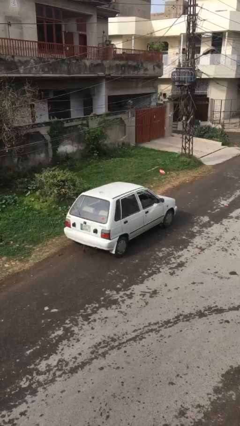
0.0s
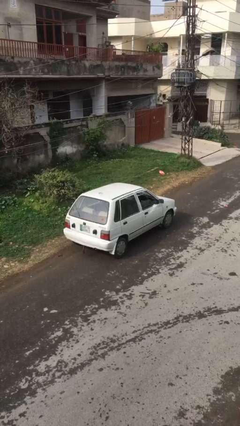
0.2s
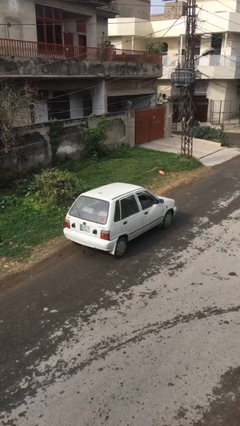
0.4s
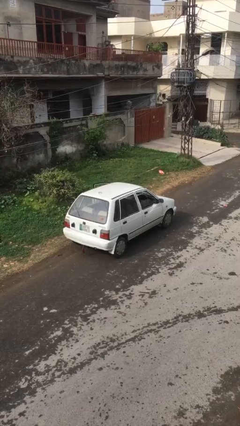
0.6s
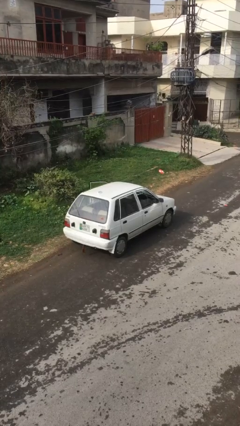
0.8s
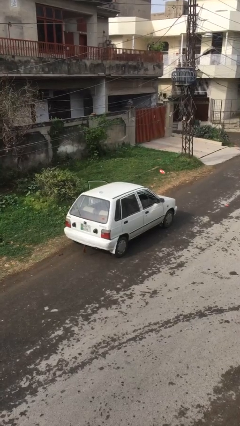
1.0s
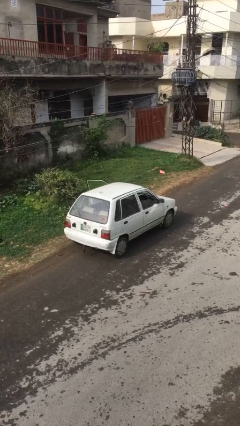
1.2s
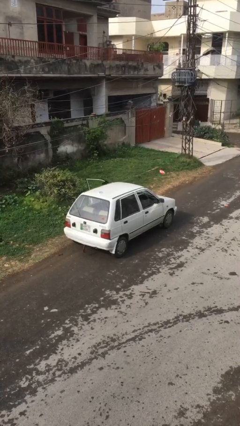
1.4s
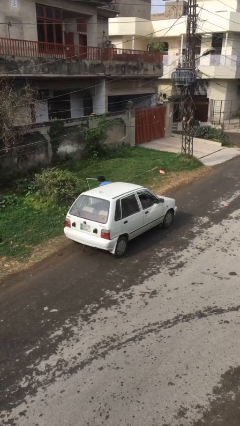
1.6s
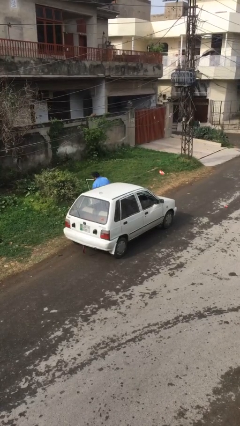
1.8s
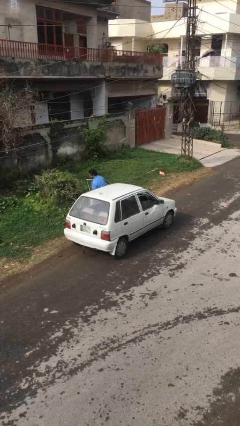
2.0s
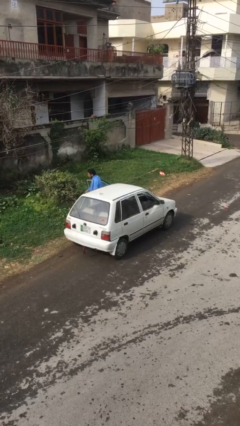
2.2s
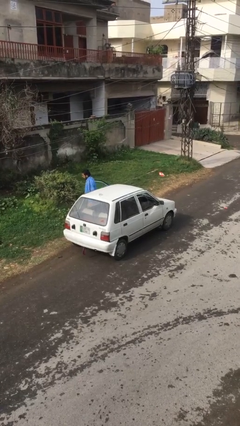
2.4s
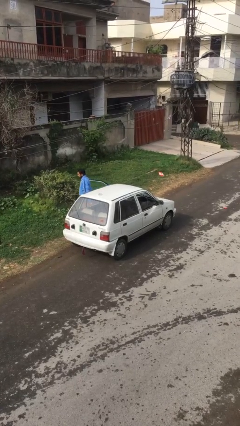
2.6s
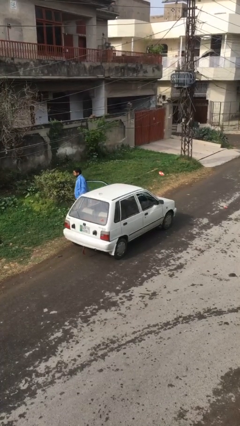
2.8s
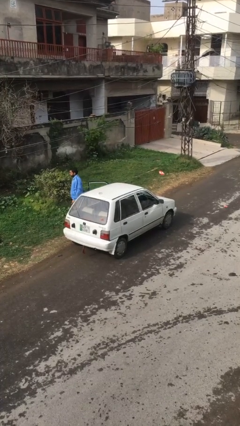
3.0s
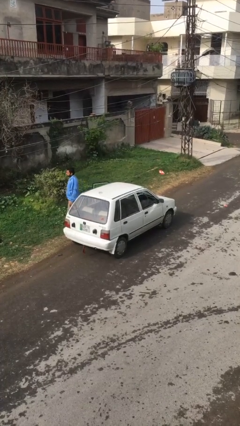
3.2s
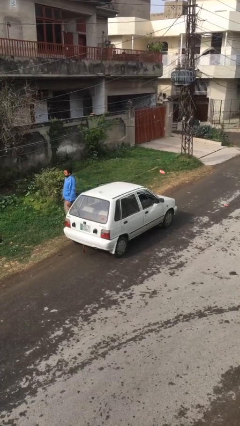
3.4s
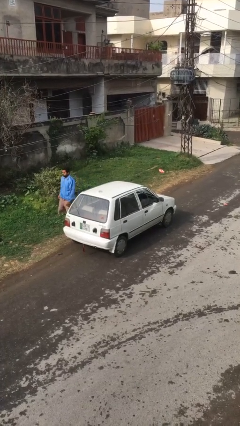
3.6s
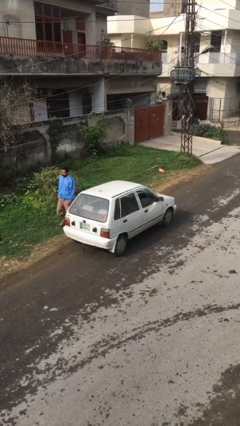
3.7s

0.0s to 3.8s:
car drops off person

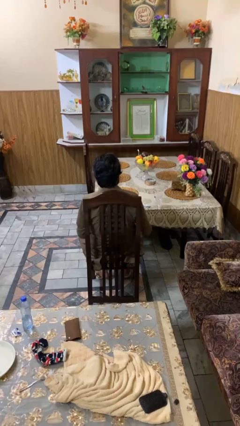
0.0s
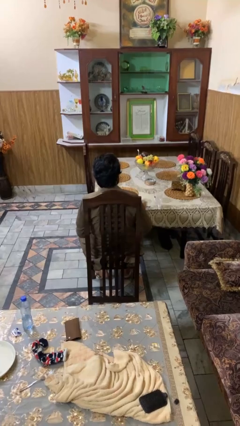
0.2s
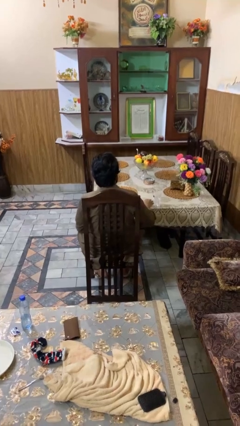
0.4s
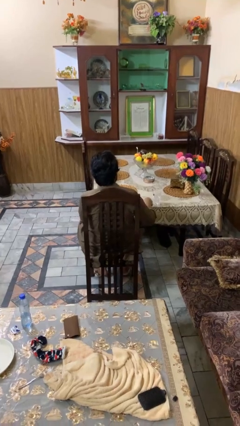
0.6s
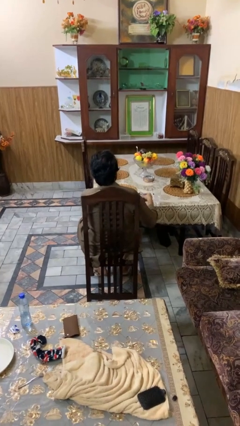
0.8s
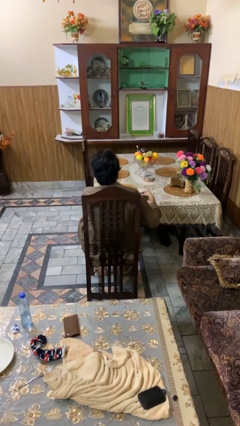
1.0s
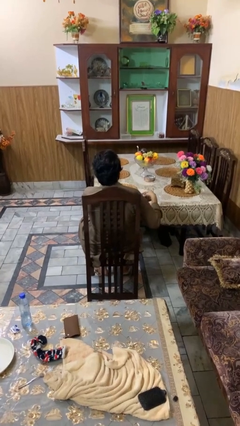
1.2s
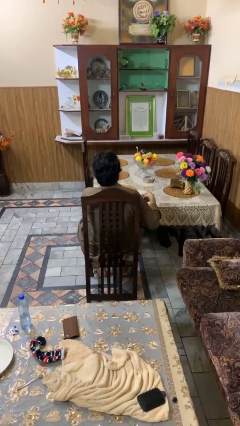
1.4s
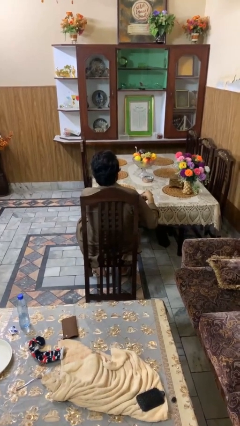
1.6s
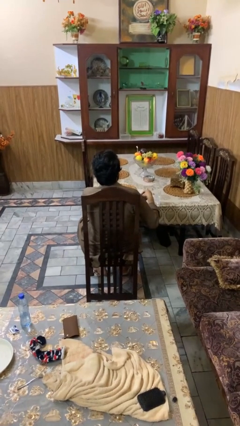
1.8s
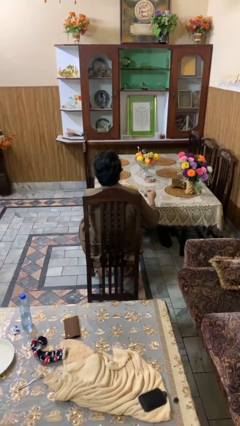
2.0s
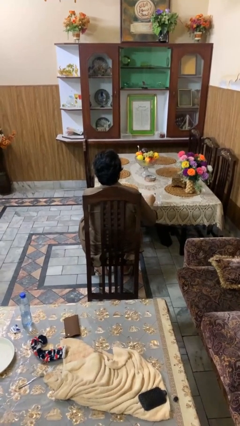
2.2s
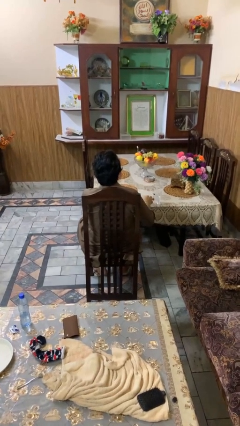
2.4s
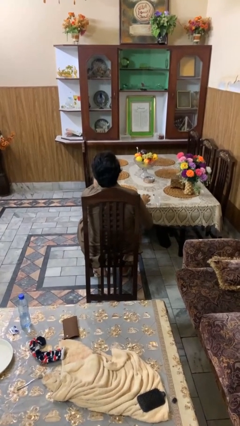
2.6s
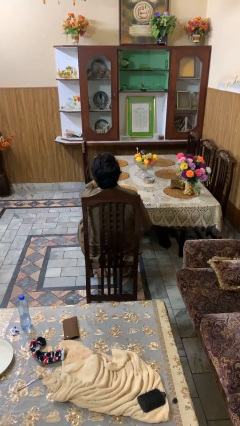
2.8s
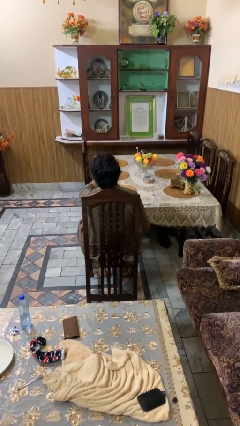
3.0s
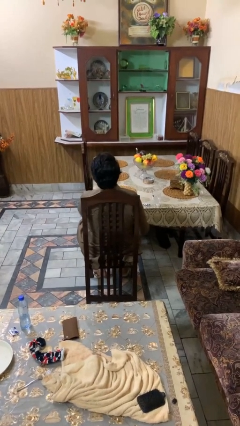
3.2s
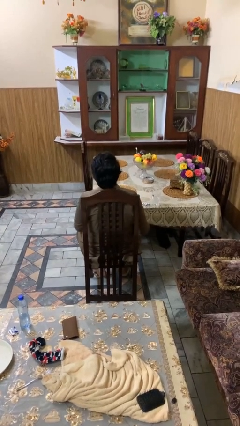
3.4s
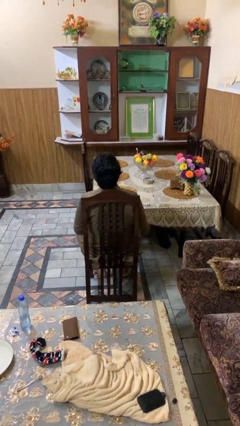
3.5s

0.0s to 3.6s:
person takes medicine pills

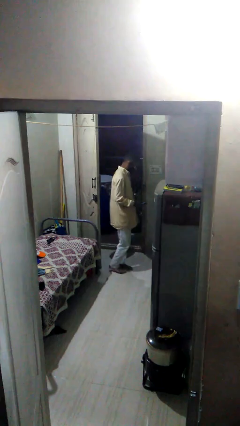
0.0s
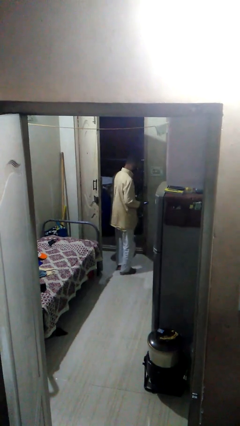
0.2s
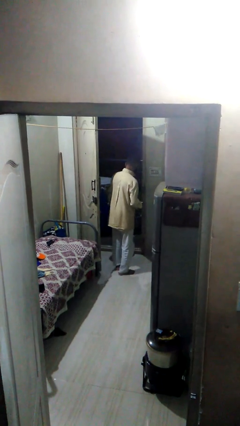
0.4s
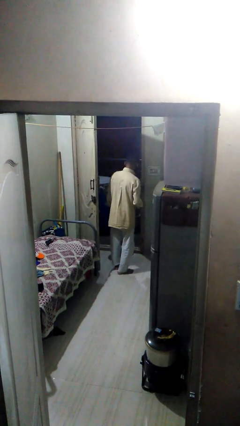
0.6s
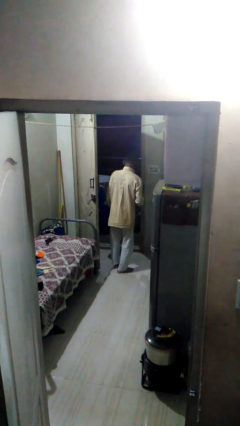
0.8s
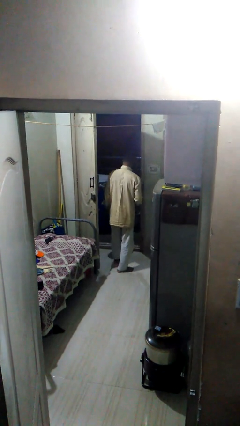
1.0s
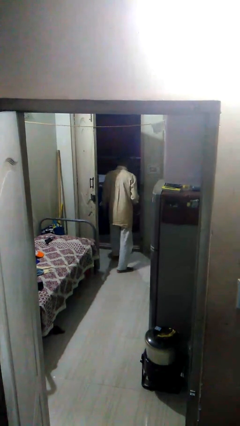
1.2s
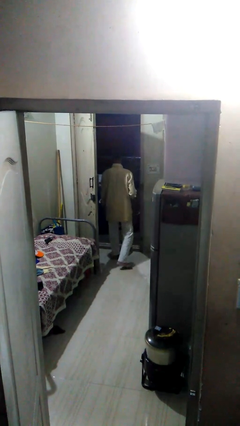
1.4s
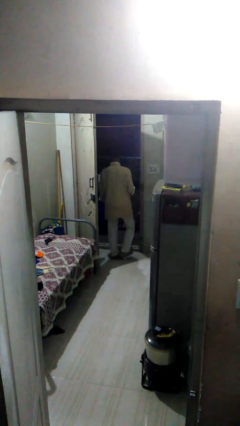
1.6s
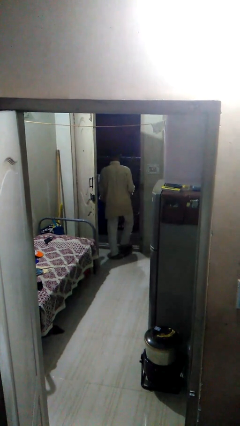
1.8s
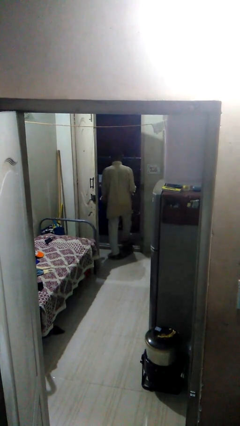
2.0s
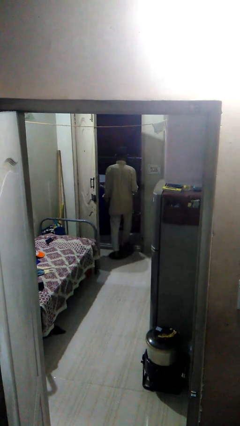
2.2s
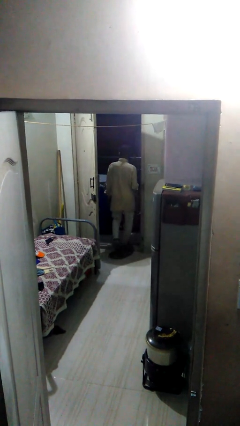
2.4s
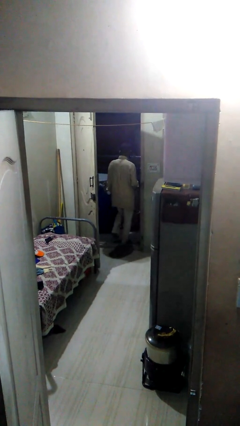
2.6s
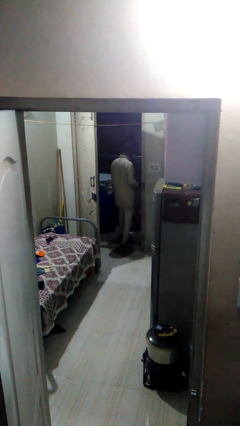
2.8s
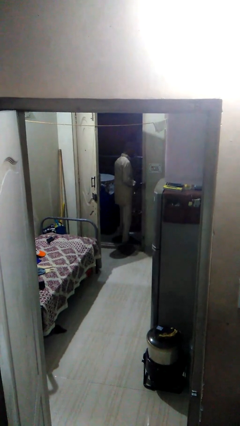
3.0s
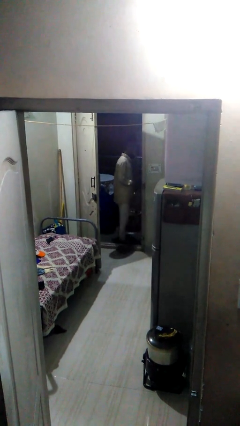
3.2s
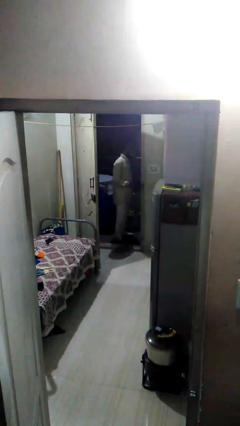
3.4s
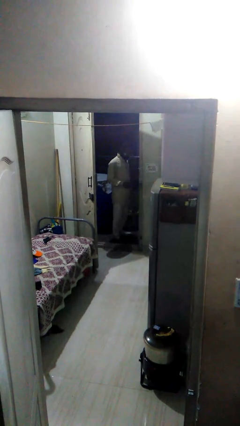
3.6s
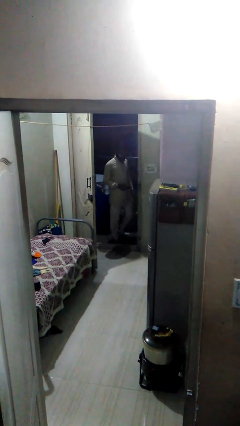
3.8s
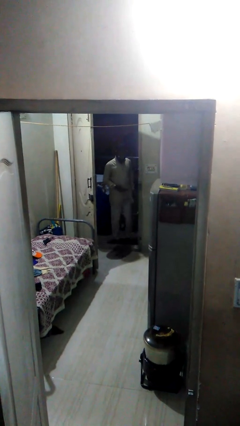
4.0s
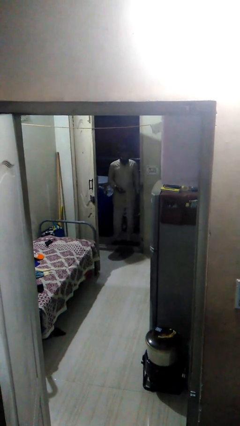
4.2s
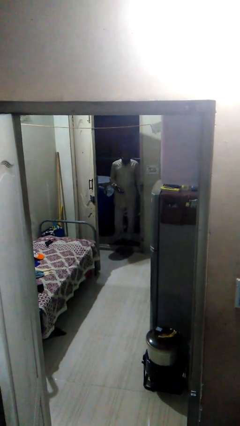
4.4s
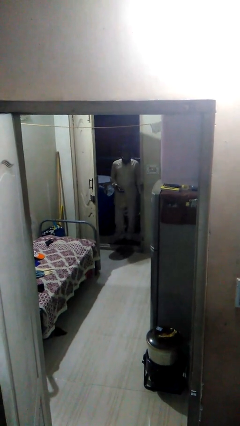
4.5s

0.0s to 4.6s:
person exits scene through structure

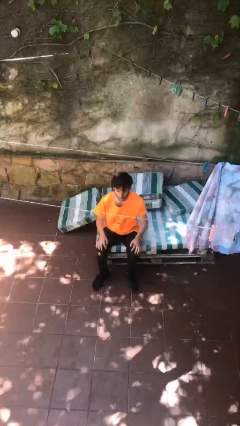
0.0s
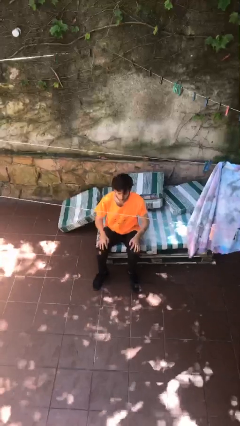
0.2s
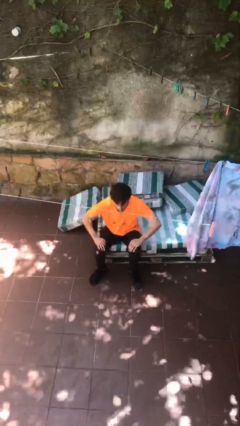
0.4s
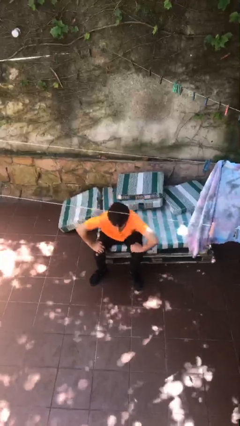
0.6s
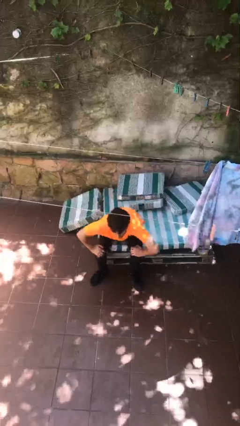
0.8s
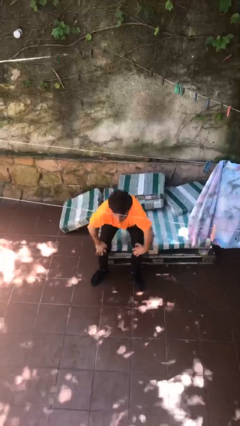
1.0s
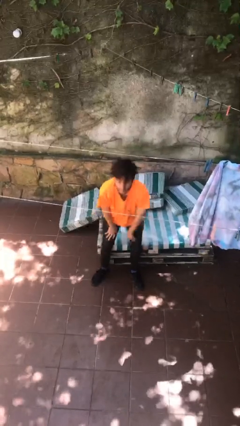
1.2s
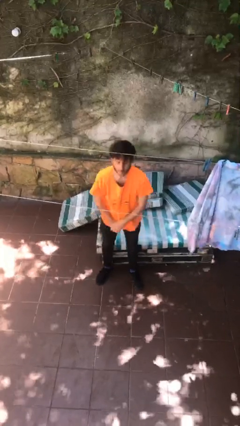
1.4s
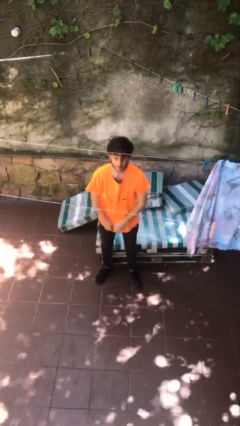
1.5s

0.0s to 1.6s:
person stands up

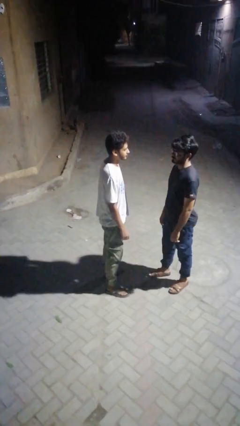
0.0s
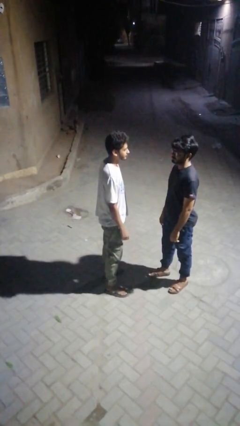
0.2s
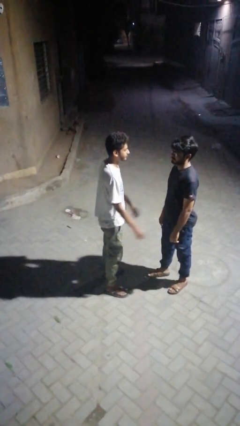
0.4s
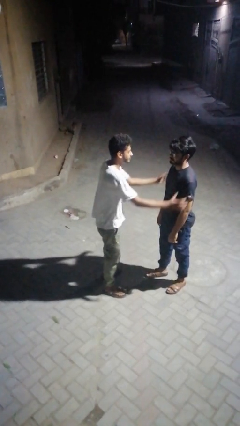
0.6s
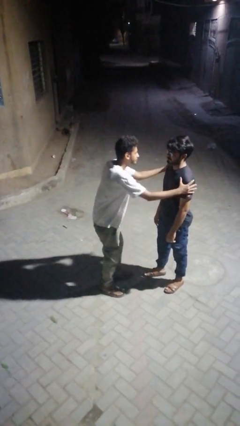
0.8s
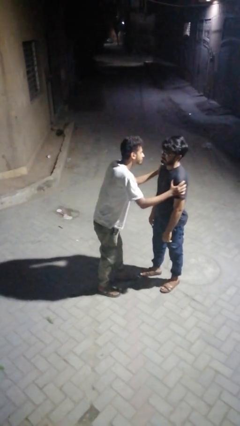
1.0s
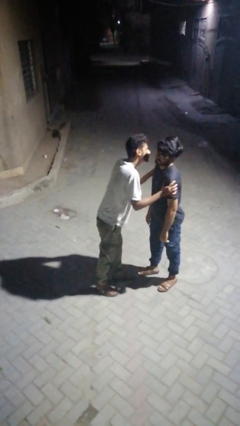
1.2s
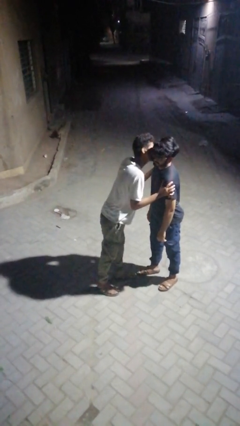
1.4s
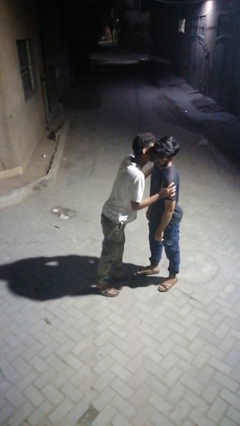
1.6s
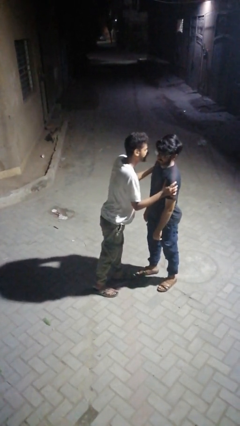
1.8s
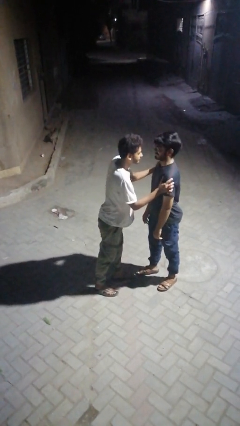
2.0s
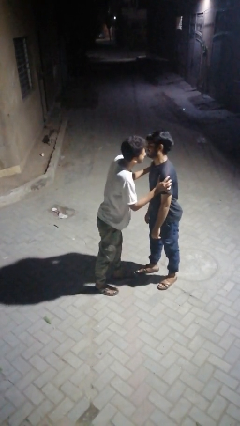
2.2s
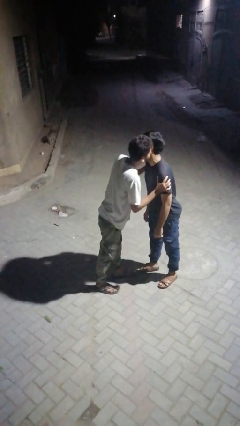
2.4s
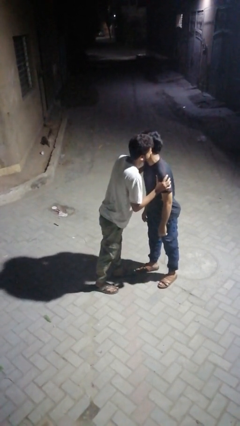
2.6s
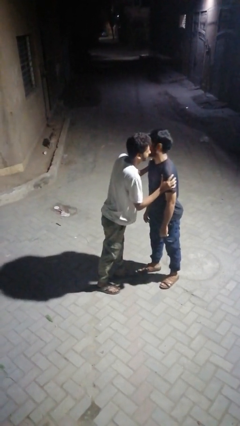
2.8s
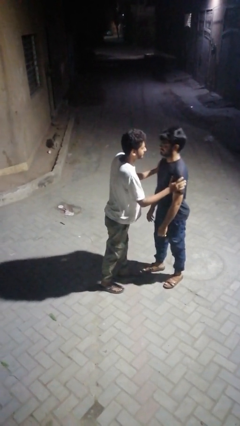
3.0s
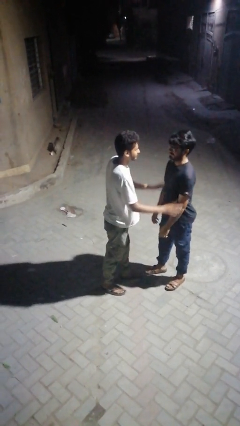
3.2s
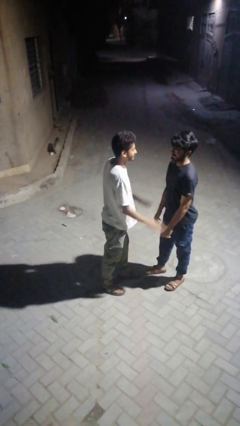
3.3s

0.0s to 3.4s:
person kisses cheek of person

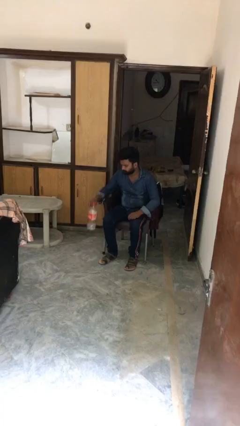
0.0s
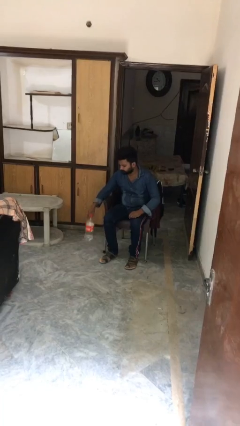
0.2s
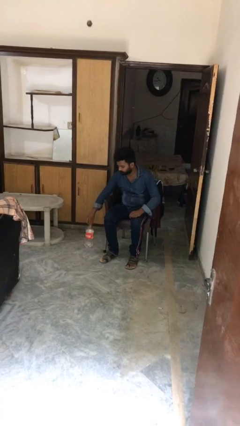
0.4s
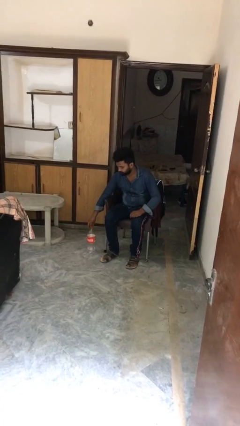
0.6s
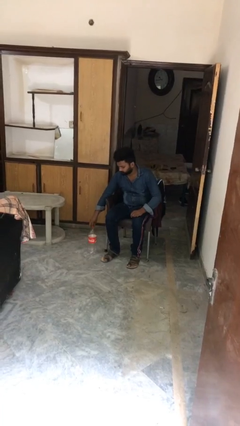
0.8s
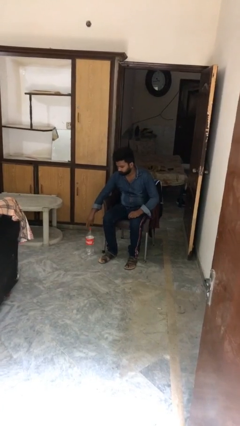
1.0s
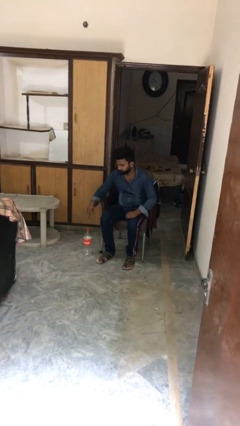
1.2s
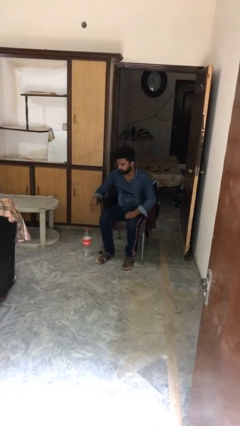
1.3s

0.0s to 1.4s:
person puts down object on floor
